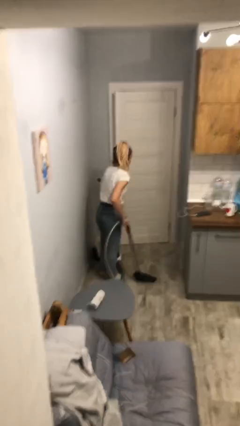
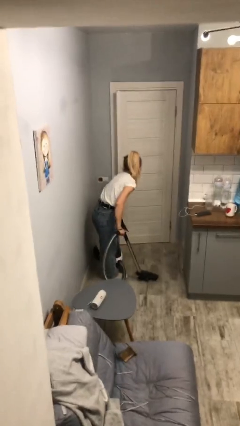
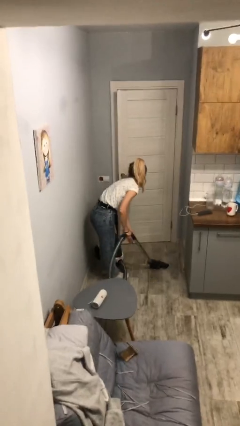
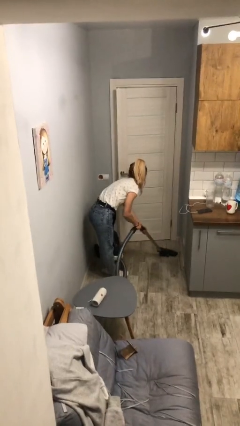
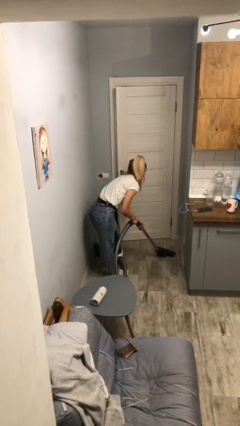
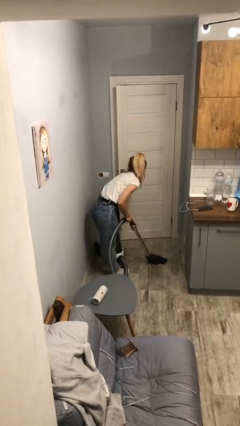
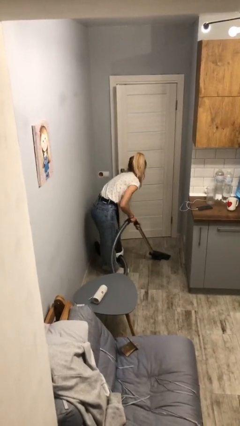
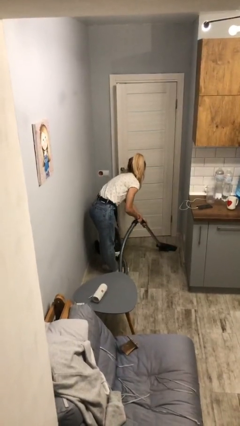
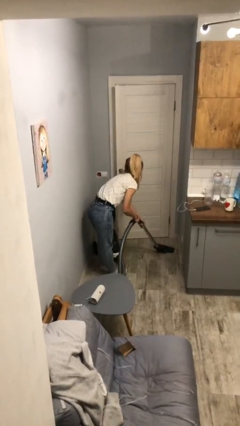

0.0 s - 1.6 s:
person vacuums carpet

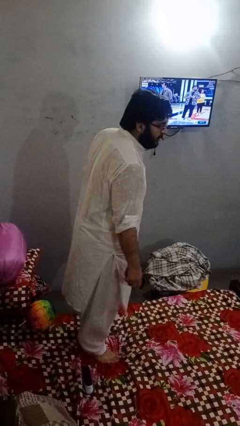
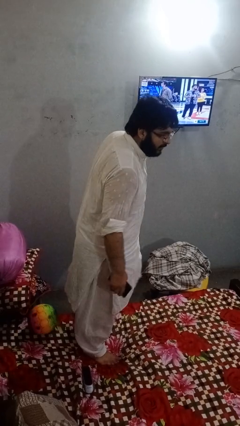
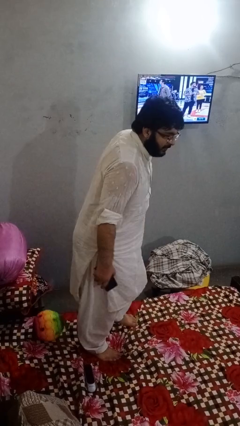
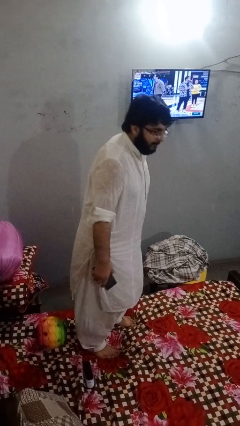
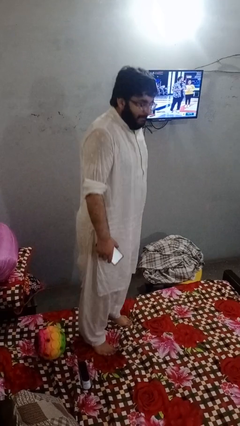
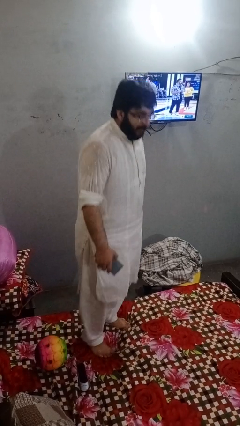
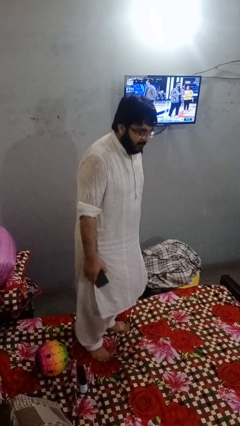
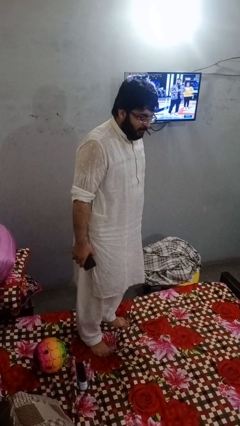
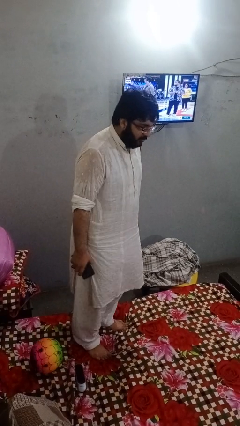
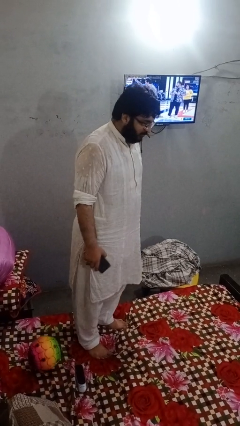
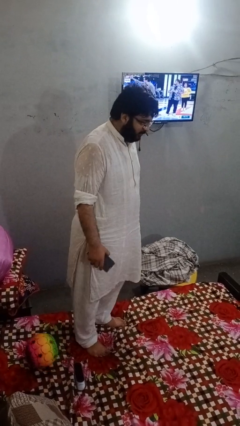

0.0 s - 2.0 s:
person jumps on bed

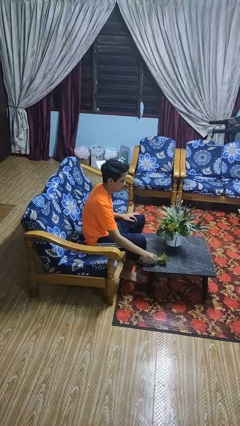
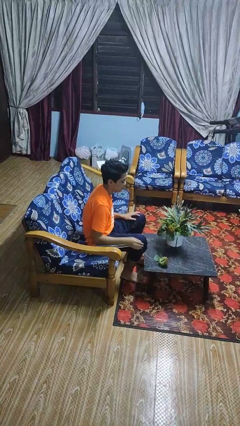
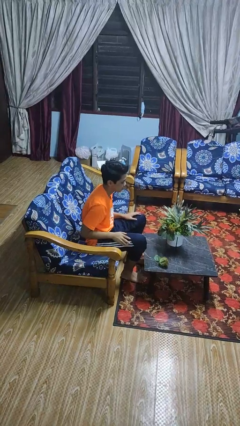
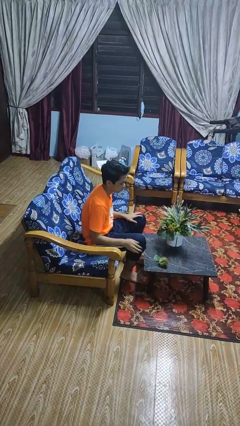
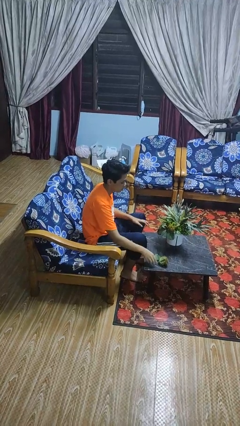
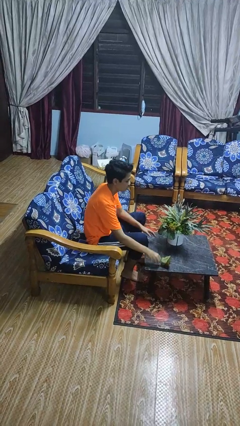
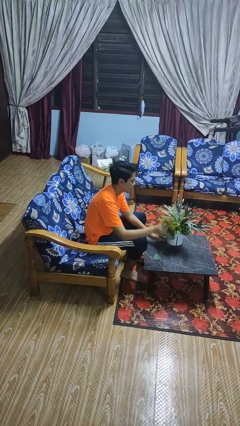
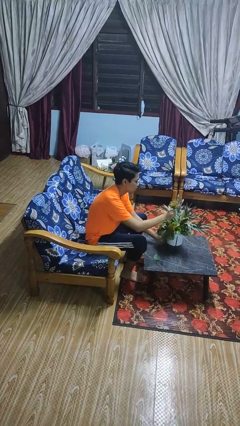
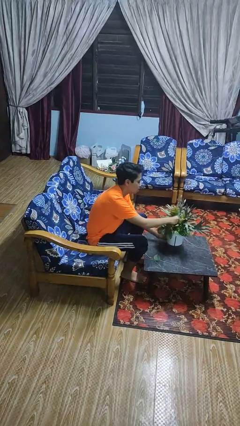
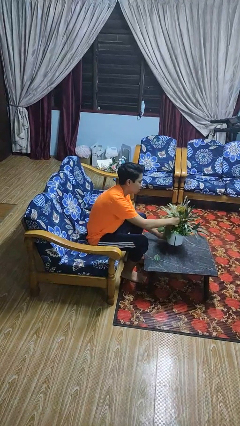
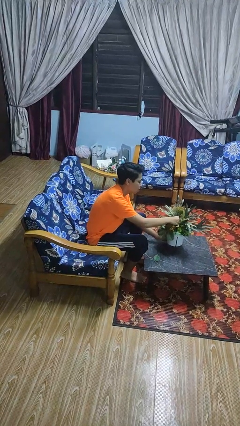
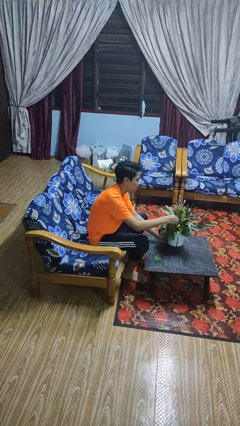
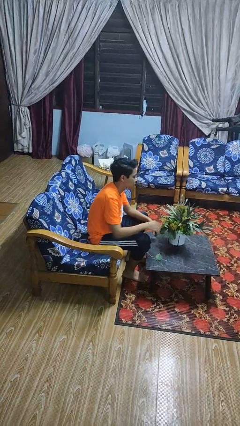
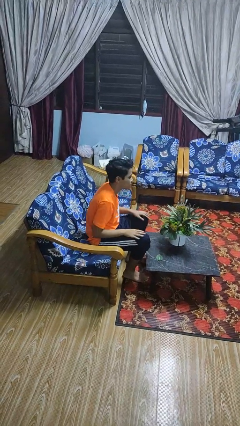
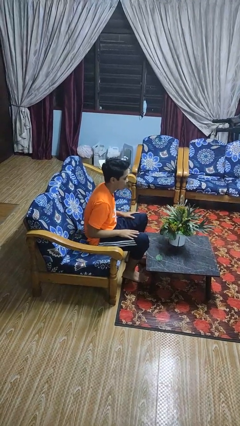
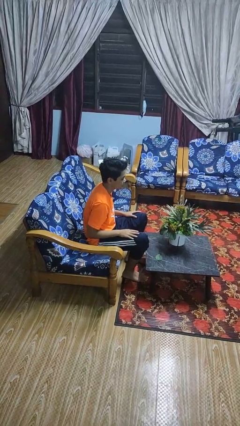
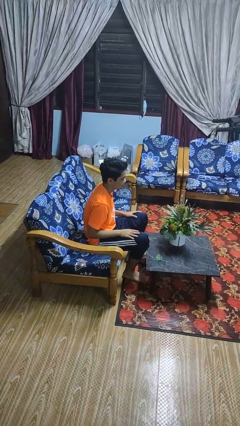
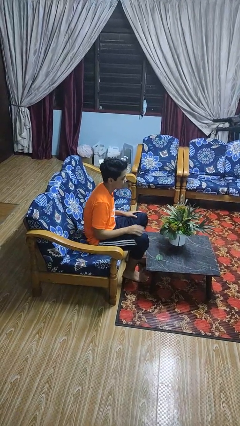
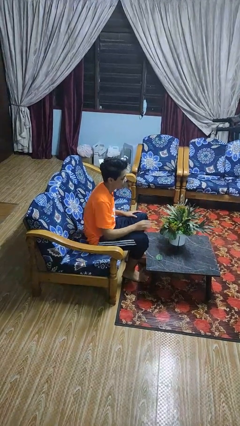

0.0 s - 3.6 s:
person arranges flowers in vase

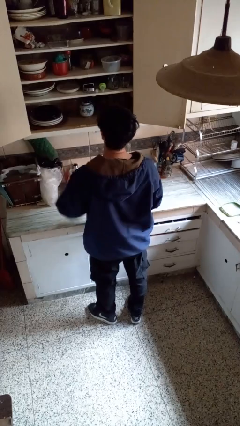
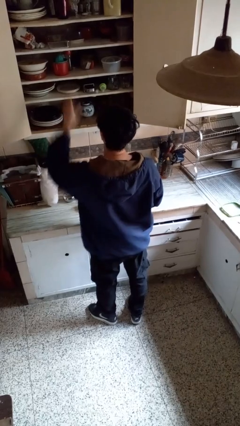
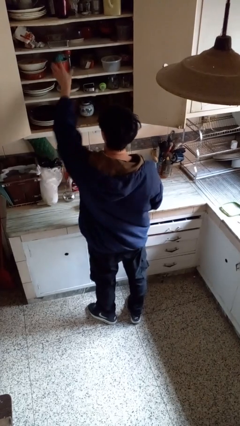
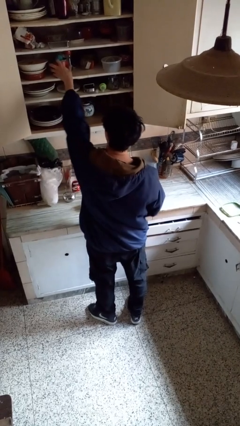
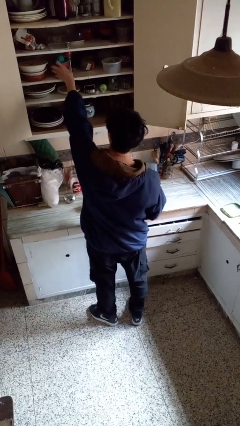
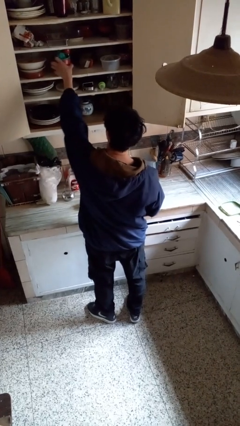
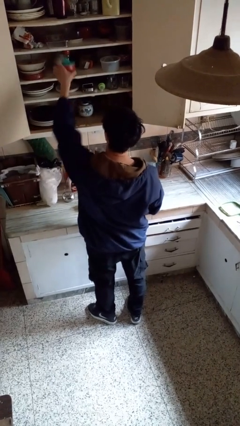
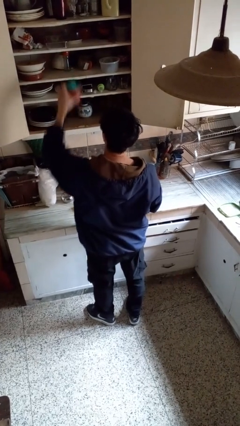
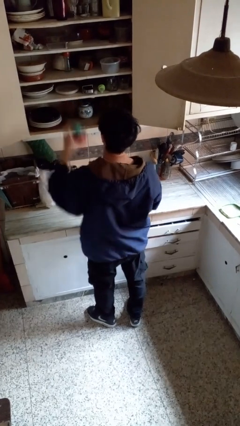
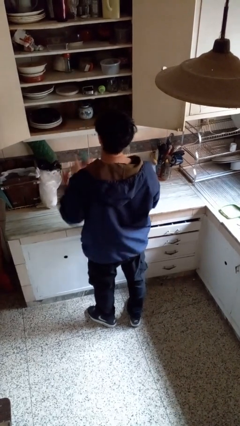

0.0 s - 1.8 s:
person takes object from cabinet

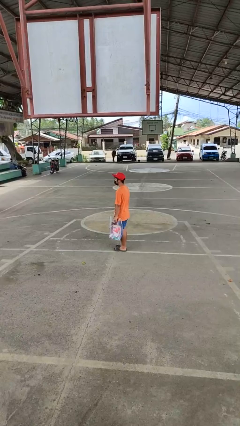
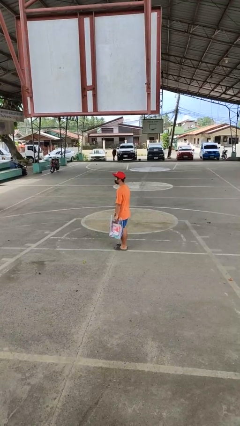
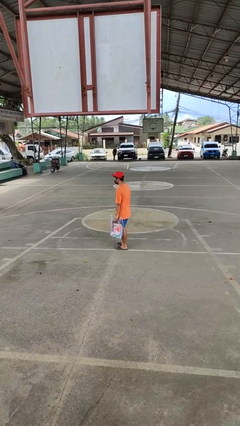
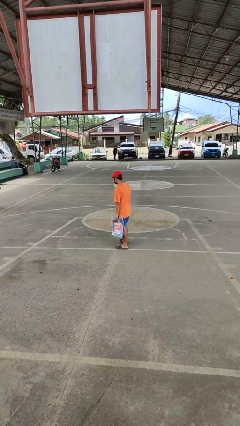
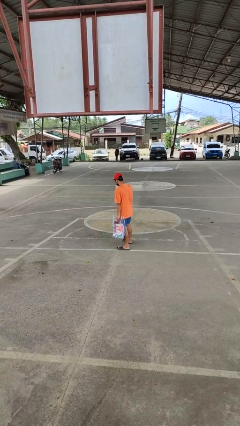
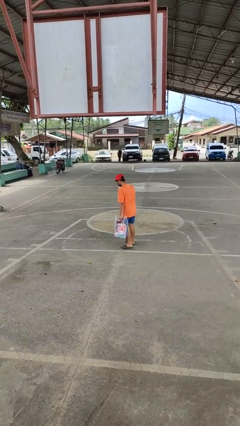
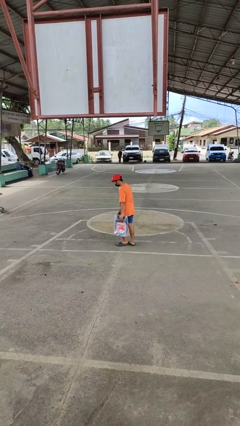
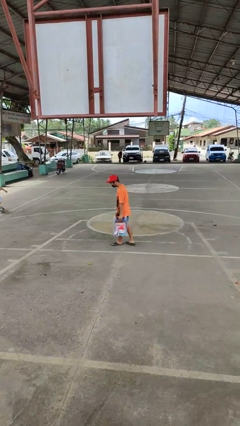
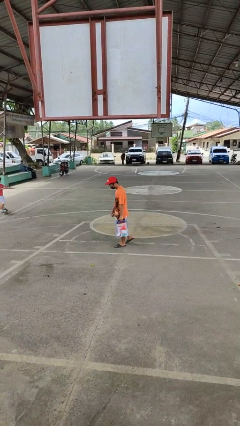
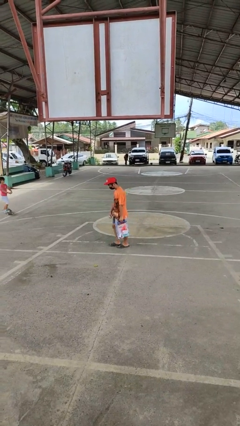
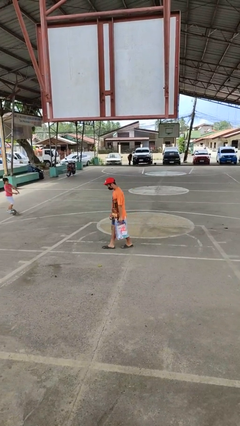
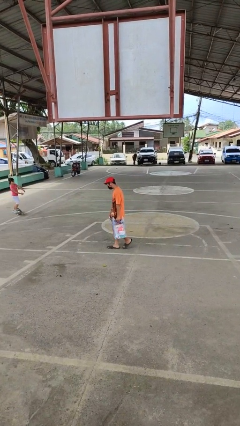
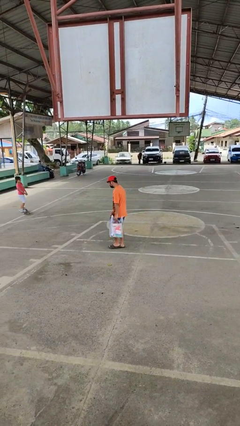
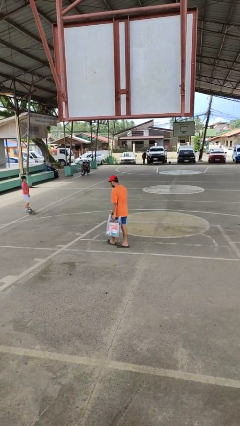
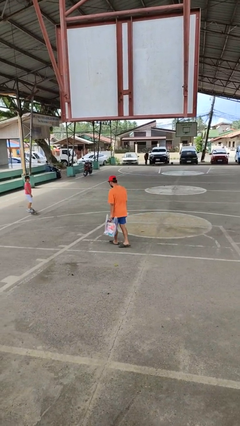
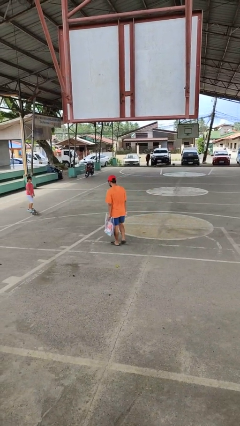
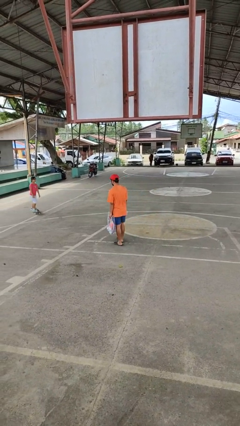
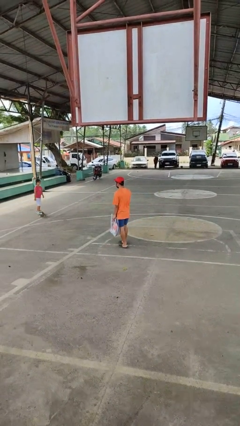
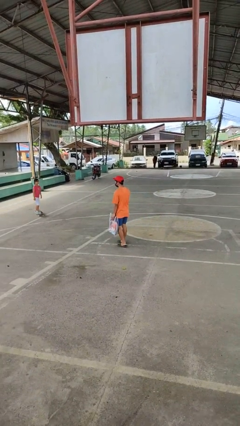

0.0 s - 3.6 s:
person carries groceries

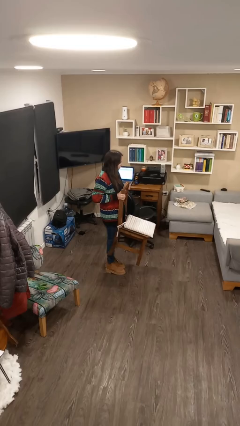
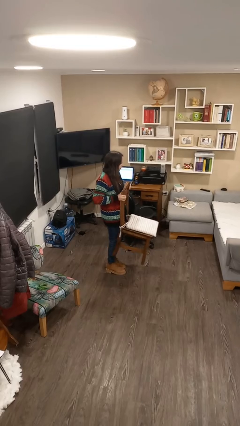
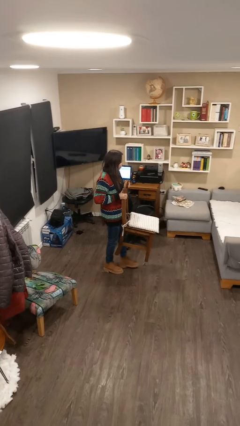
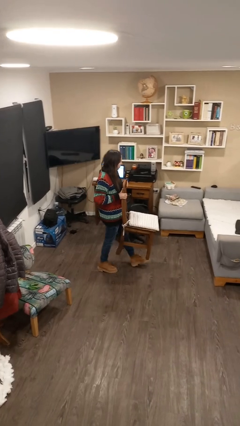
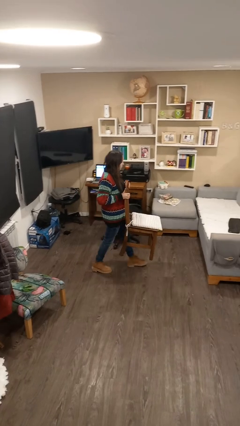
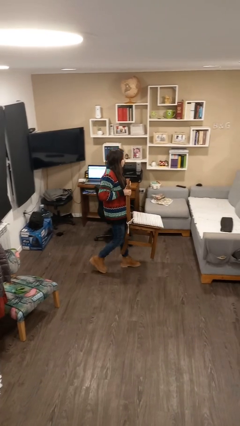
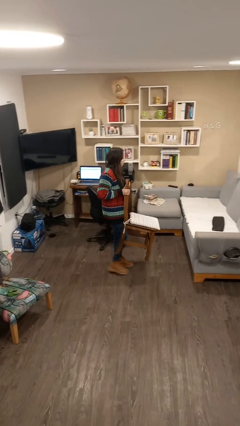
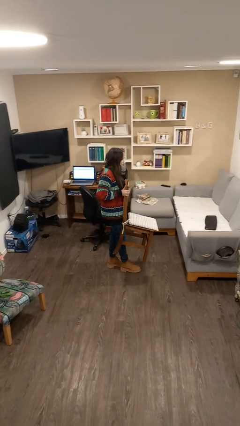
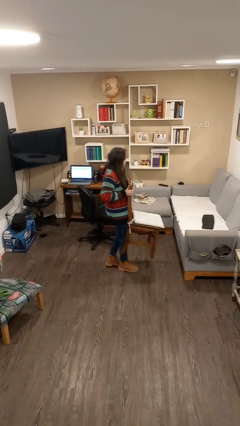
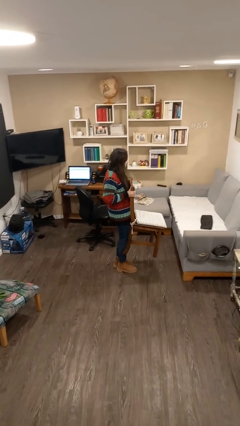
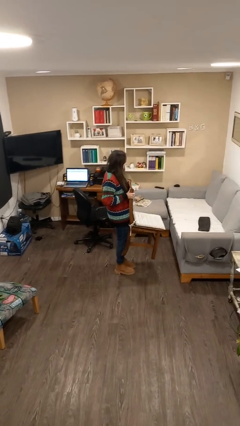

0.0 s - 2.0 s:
person carries furniture

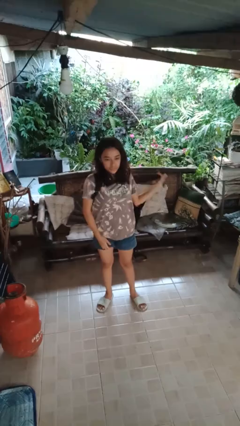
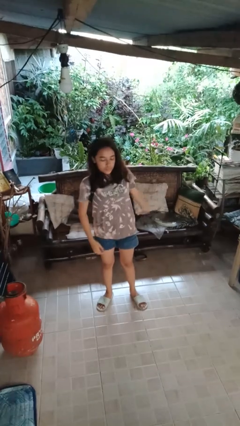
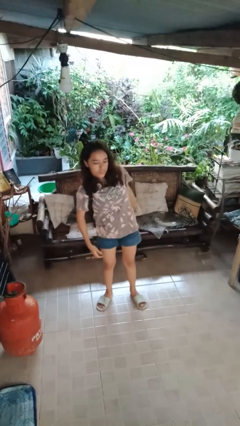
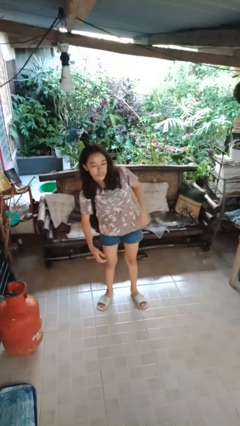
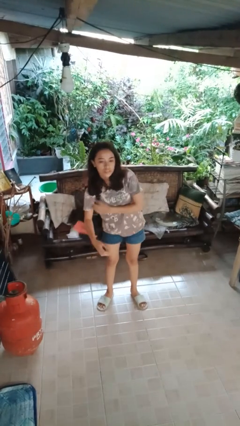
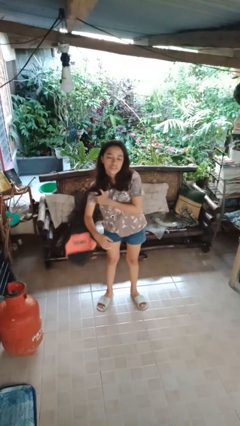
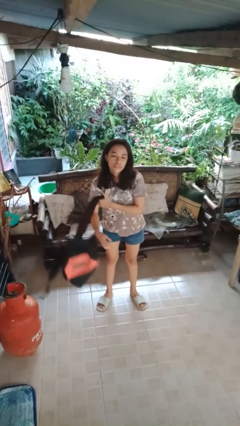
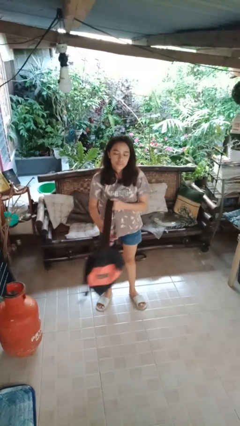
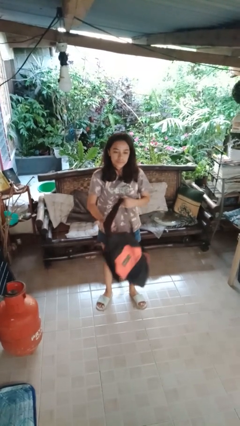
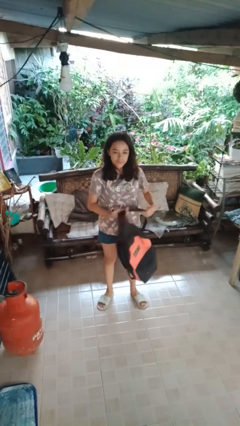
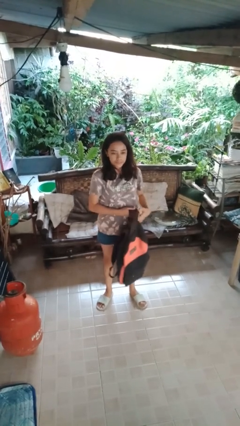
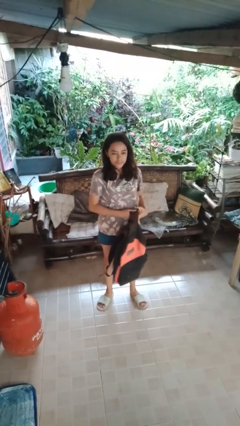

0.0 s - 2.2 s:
person takes off backpack
